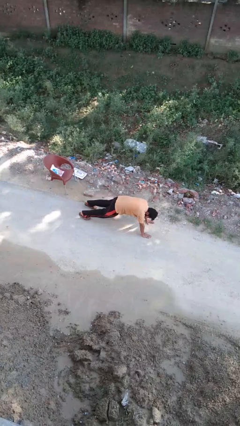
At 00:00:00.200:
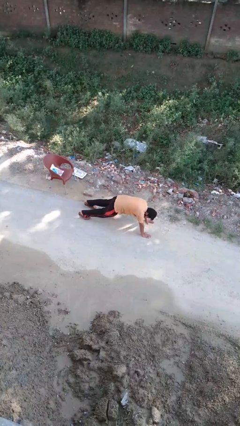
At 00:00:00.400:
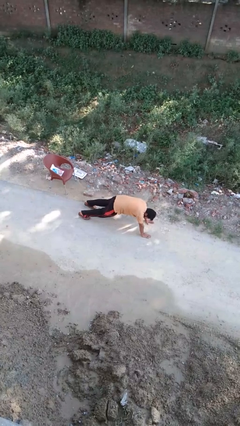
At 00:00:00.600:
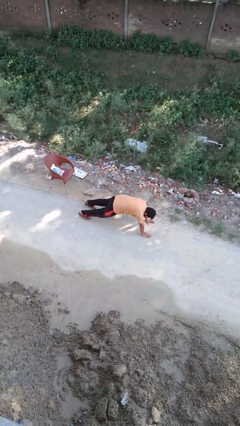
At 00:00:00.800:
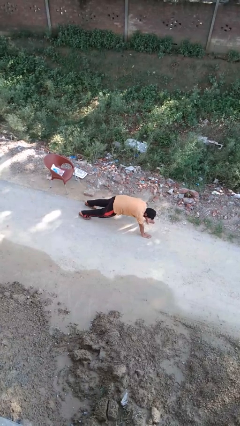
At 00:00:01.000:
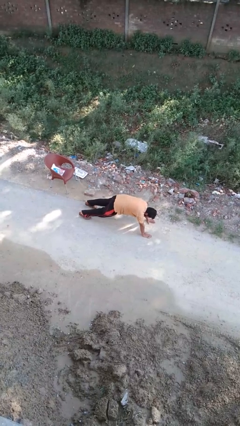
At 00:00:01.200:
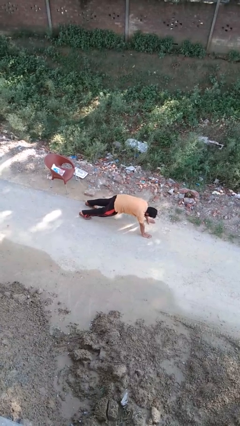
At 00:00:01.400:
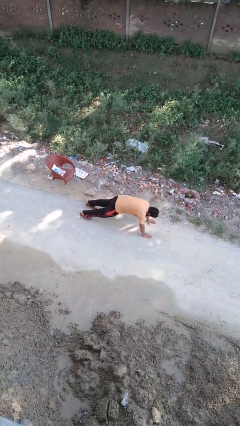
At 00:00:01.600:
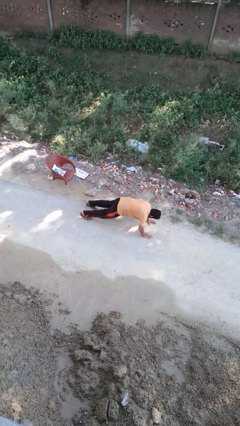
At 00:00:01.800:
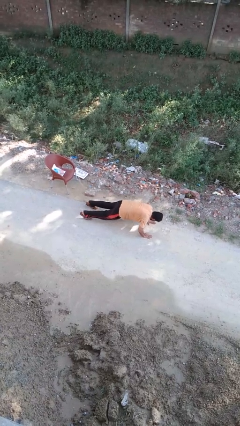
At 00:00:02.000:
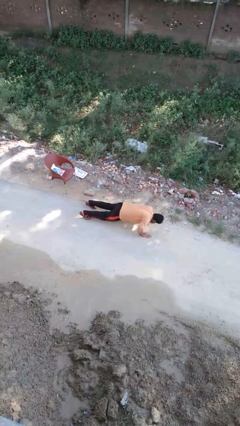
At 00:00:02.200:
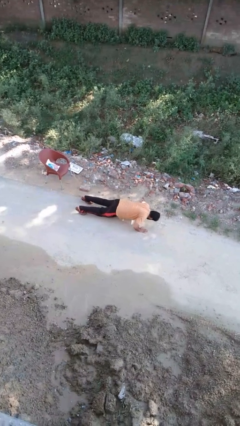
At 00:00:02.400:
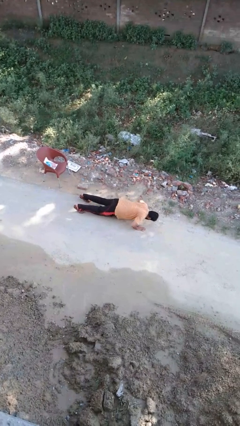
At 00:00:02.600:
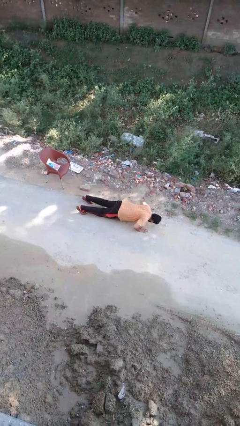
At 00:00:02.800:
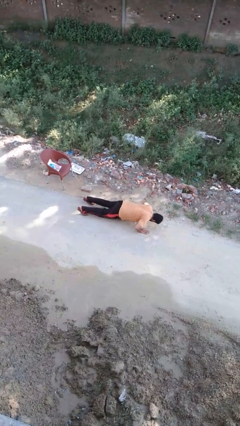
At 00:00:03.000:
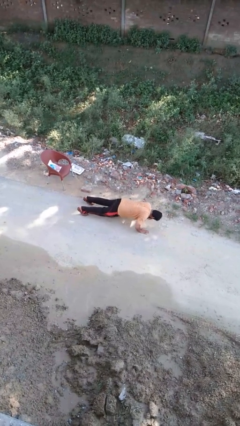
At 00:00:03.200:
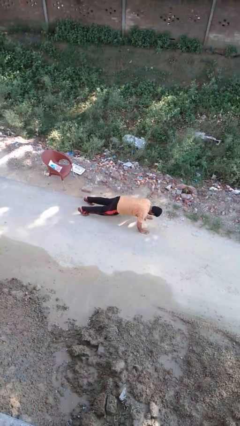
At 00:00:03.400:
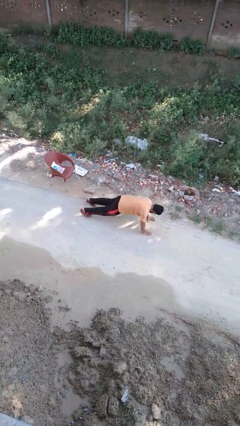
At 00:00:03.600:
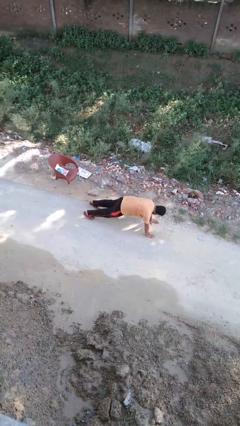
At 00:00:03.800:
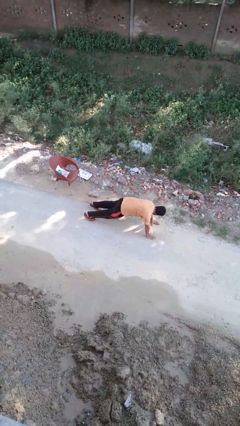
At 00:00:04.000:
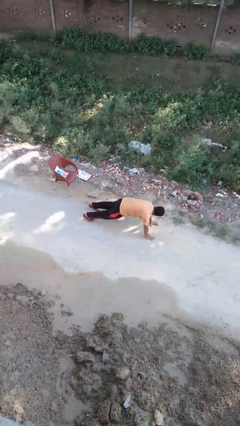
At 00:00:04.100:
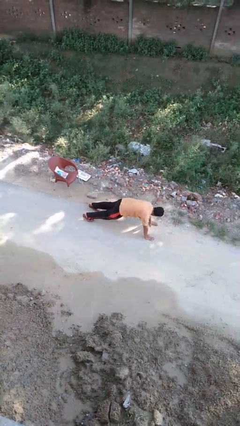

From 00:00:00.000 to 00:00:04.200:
person exercises with pushup

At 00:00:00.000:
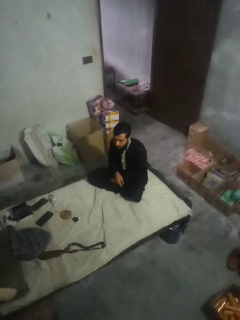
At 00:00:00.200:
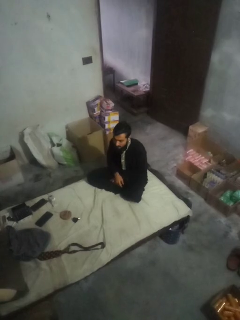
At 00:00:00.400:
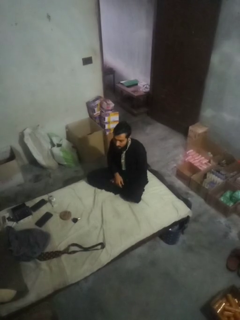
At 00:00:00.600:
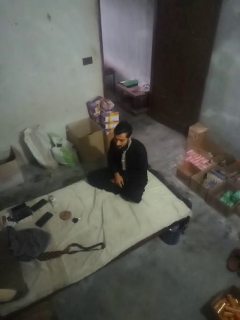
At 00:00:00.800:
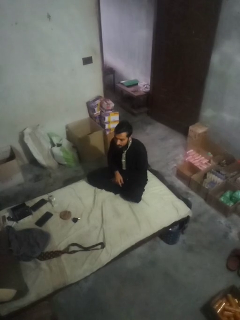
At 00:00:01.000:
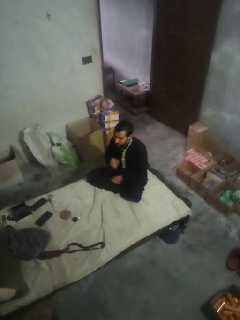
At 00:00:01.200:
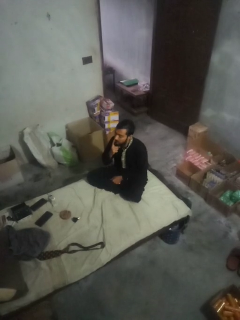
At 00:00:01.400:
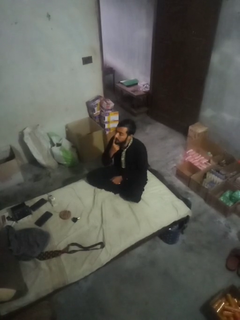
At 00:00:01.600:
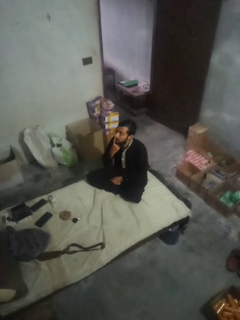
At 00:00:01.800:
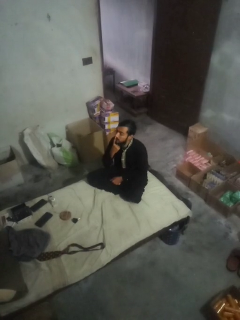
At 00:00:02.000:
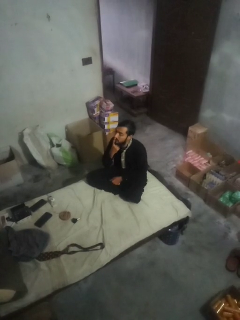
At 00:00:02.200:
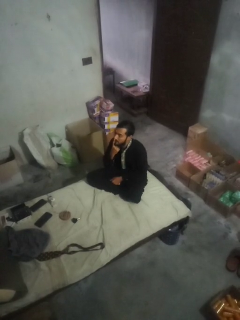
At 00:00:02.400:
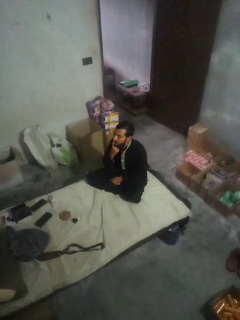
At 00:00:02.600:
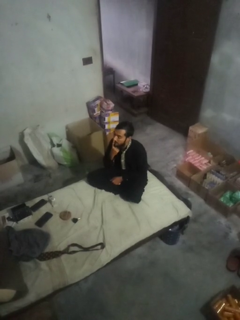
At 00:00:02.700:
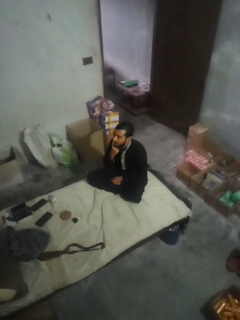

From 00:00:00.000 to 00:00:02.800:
person gestures be quiet

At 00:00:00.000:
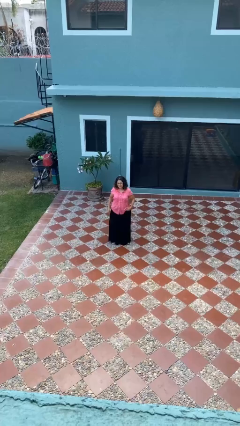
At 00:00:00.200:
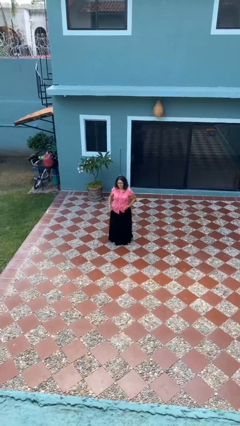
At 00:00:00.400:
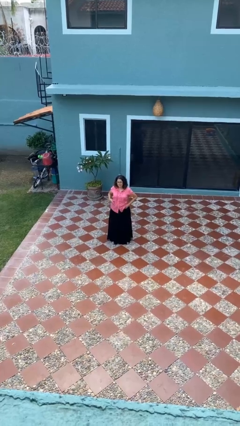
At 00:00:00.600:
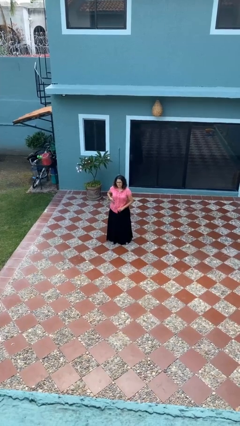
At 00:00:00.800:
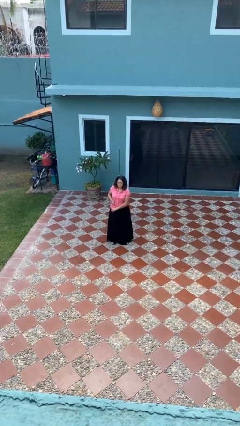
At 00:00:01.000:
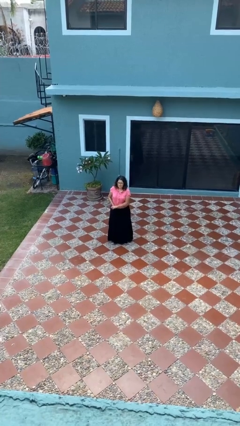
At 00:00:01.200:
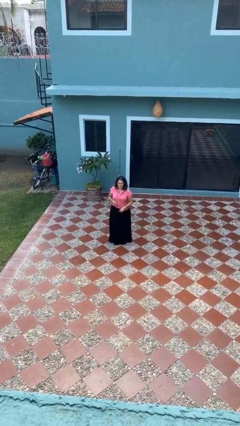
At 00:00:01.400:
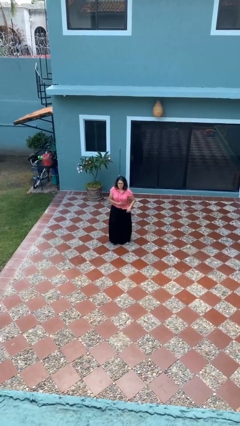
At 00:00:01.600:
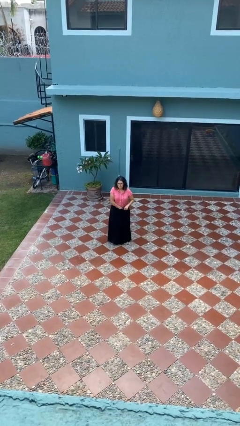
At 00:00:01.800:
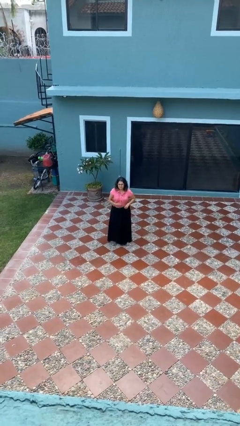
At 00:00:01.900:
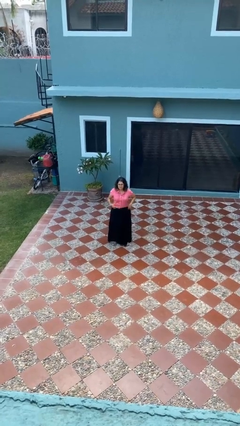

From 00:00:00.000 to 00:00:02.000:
person tucks in shirt

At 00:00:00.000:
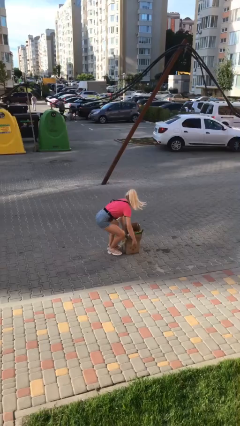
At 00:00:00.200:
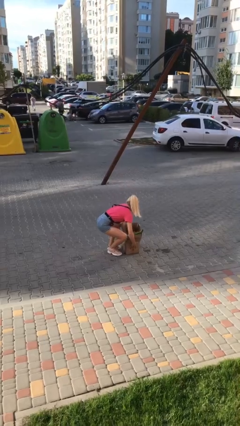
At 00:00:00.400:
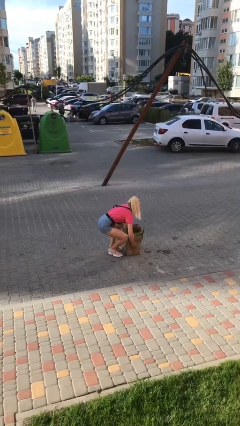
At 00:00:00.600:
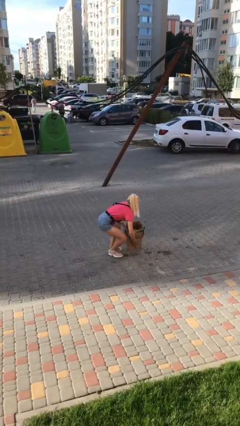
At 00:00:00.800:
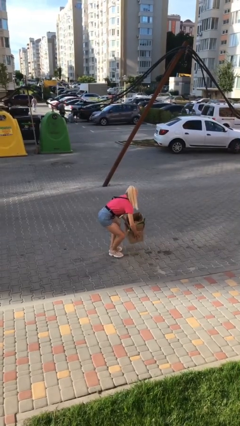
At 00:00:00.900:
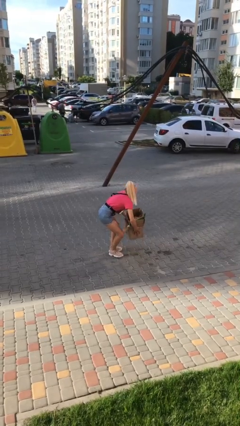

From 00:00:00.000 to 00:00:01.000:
person picks up object from floor

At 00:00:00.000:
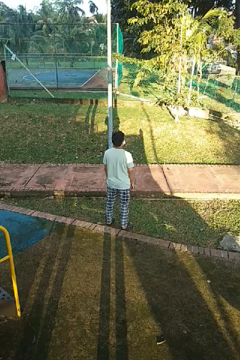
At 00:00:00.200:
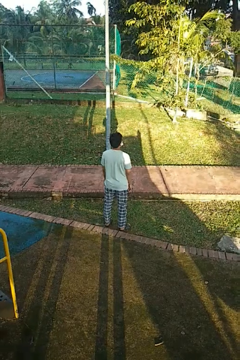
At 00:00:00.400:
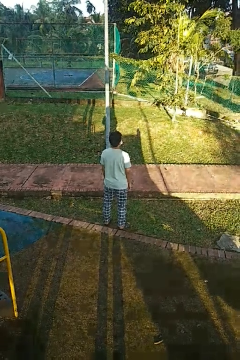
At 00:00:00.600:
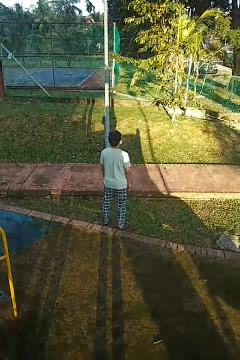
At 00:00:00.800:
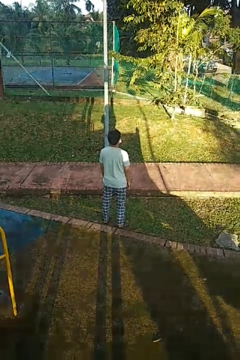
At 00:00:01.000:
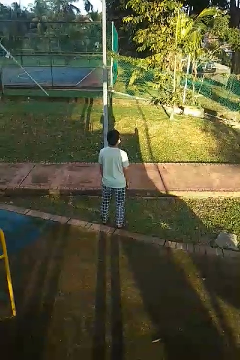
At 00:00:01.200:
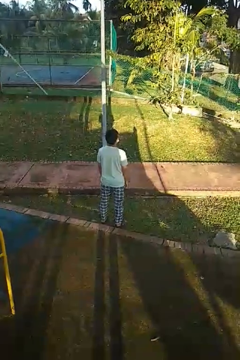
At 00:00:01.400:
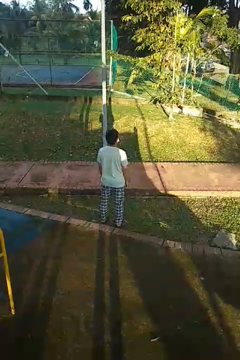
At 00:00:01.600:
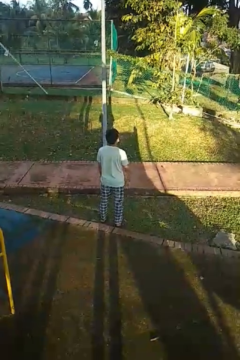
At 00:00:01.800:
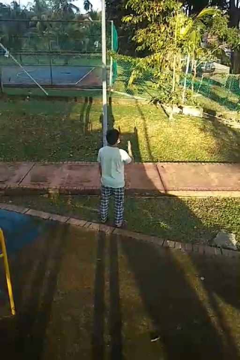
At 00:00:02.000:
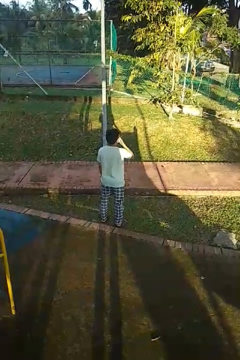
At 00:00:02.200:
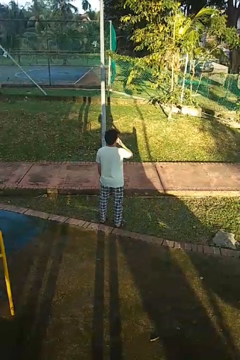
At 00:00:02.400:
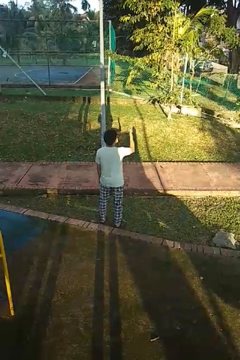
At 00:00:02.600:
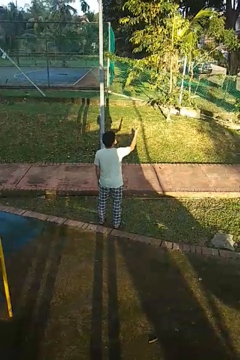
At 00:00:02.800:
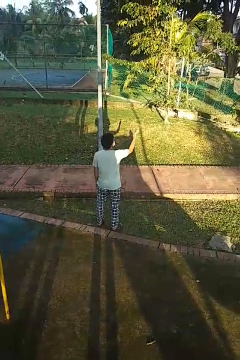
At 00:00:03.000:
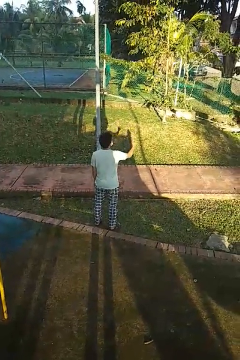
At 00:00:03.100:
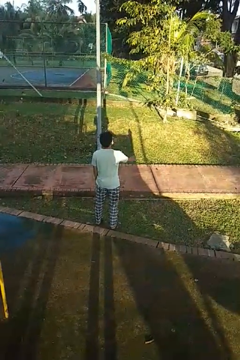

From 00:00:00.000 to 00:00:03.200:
person gestures blow kiss

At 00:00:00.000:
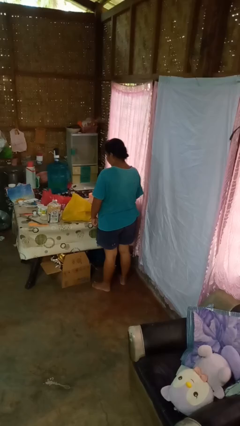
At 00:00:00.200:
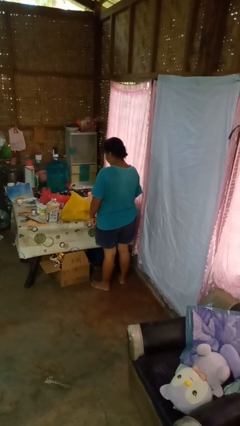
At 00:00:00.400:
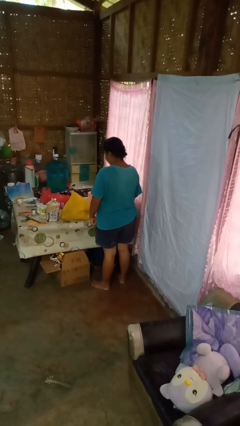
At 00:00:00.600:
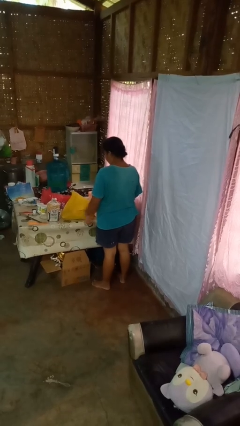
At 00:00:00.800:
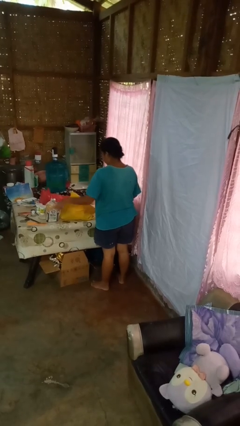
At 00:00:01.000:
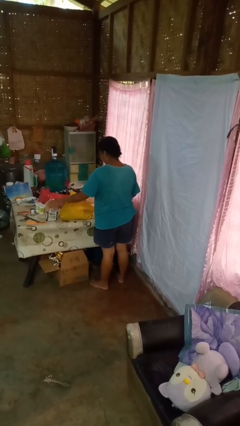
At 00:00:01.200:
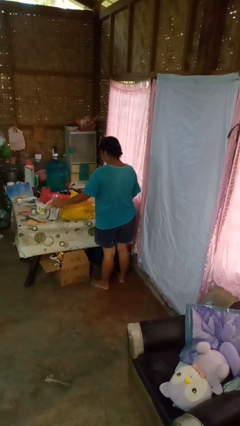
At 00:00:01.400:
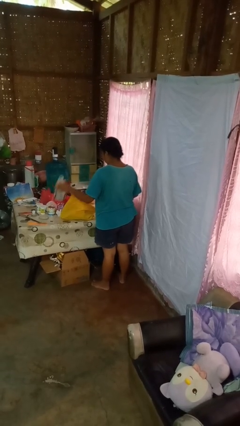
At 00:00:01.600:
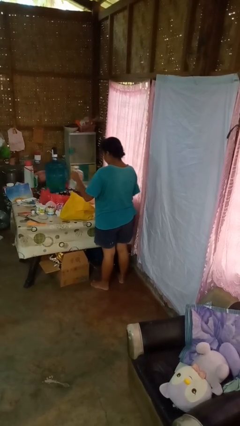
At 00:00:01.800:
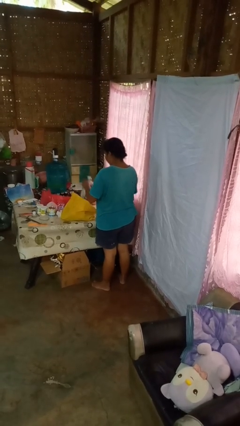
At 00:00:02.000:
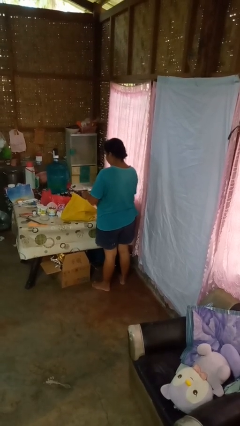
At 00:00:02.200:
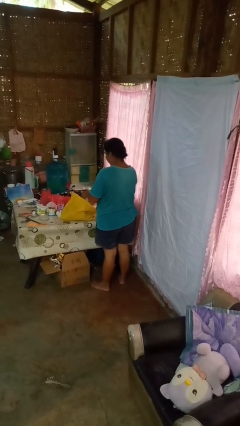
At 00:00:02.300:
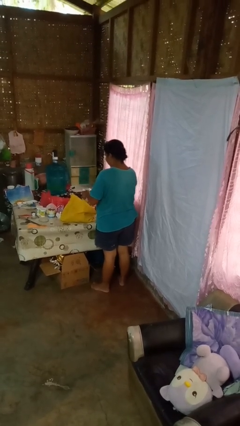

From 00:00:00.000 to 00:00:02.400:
person puts object into bag

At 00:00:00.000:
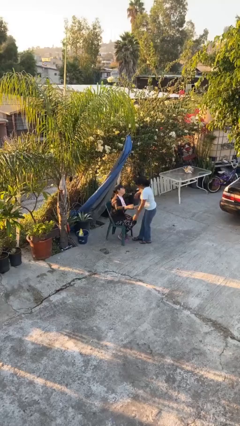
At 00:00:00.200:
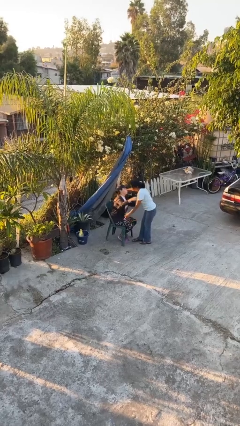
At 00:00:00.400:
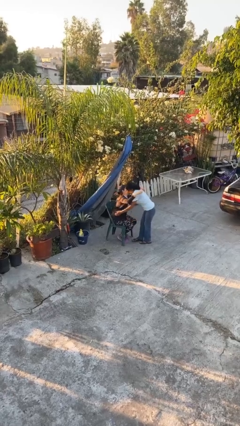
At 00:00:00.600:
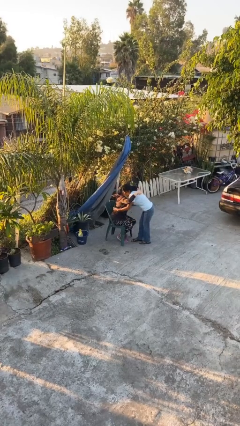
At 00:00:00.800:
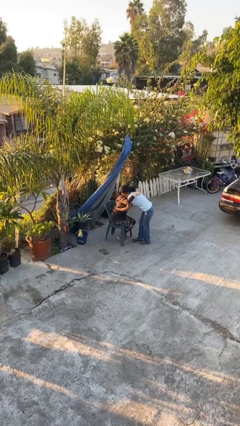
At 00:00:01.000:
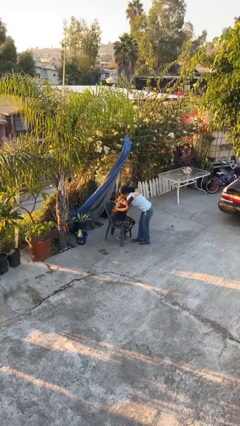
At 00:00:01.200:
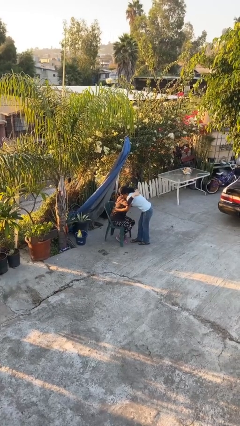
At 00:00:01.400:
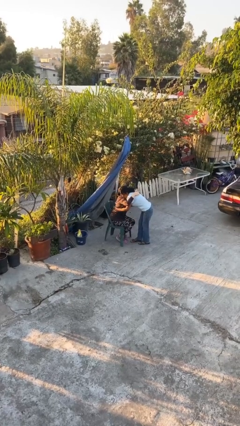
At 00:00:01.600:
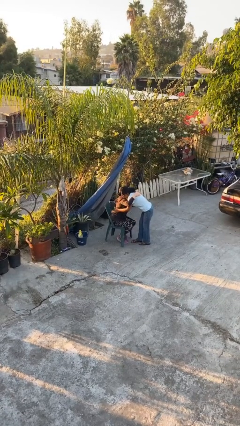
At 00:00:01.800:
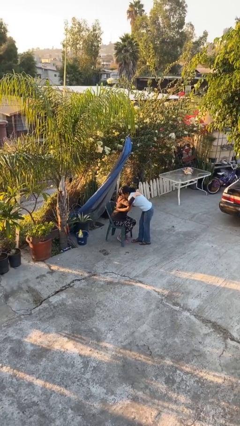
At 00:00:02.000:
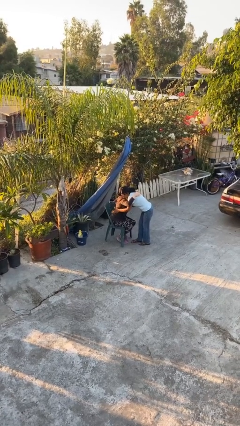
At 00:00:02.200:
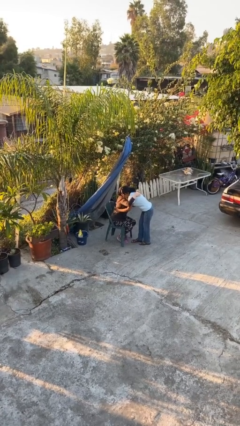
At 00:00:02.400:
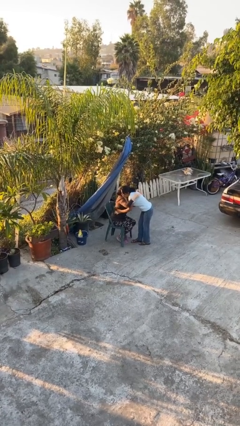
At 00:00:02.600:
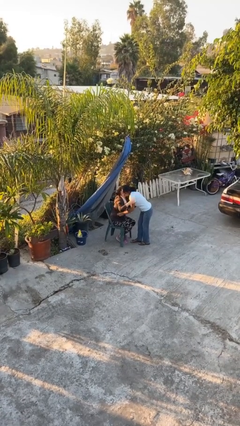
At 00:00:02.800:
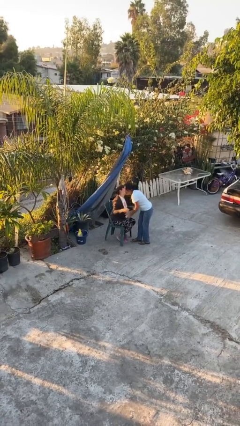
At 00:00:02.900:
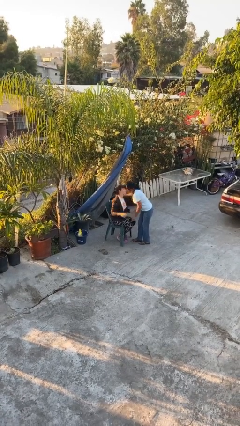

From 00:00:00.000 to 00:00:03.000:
person embraces person
